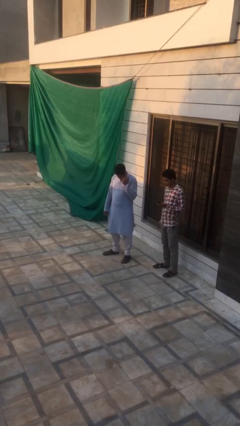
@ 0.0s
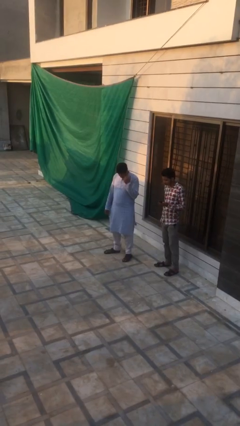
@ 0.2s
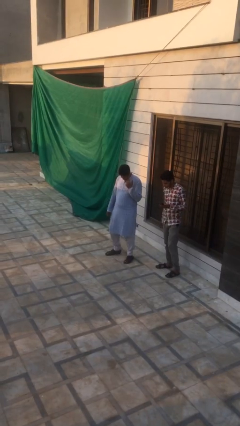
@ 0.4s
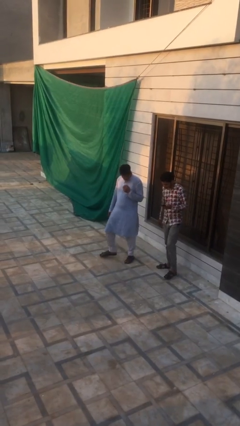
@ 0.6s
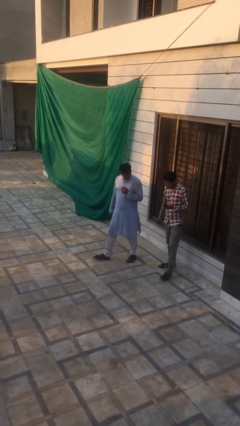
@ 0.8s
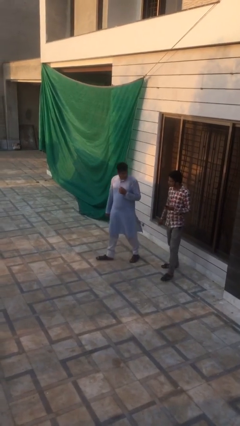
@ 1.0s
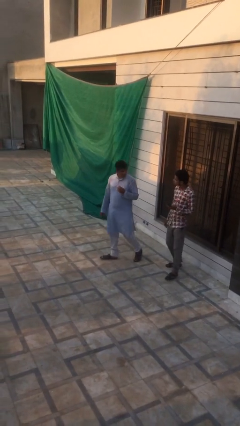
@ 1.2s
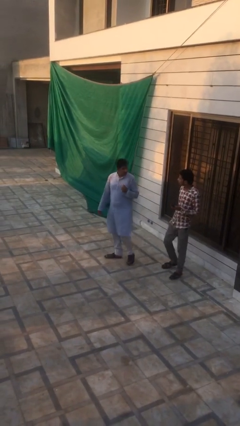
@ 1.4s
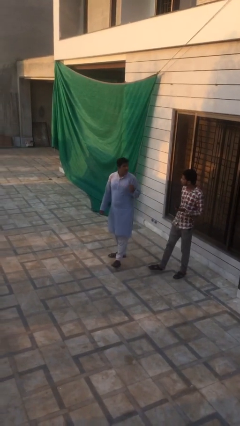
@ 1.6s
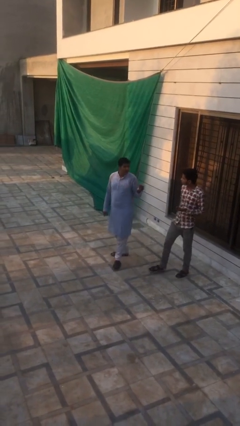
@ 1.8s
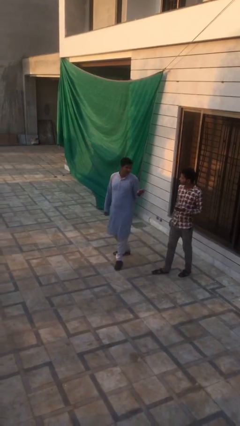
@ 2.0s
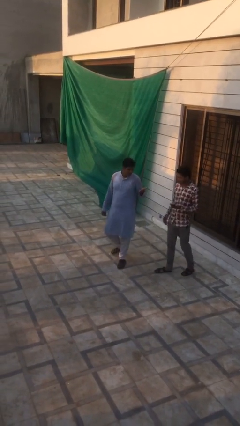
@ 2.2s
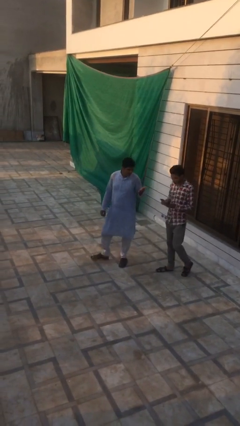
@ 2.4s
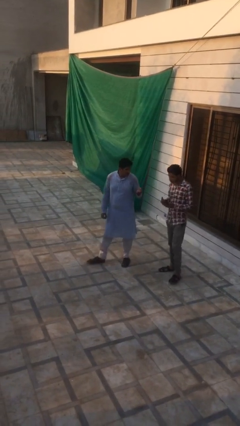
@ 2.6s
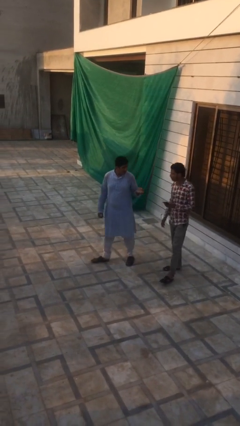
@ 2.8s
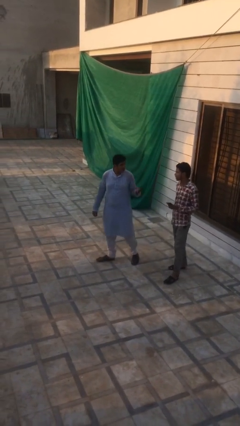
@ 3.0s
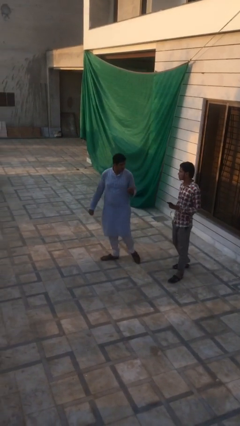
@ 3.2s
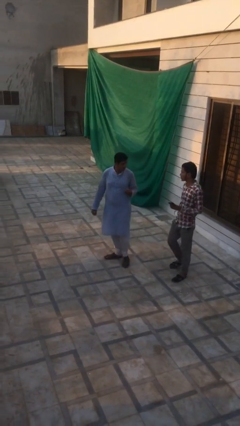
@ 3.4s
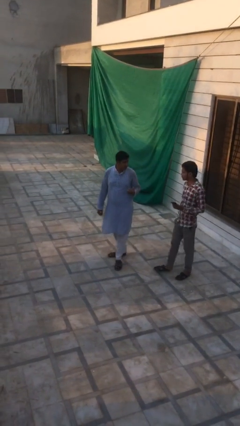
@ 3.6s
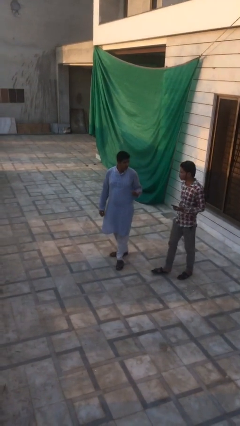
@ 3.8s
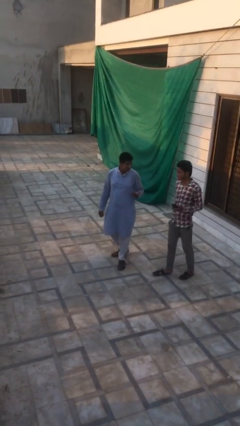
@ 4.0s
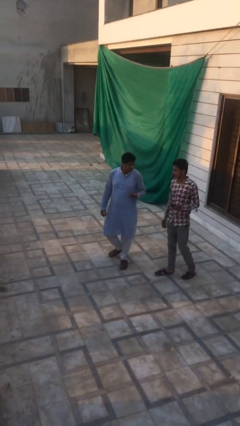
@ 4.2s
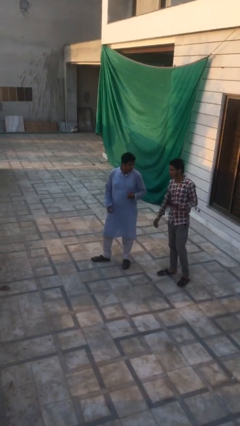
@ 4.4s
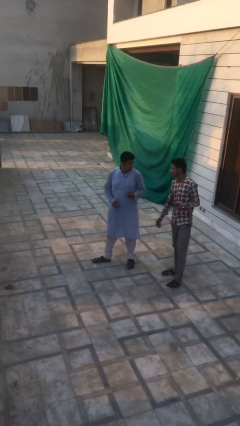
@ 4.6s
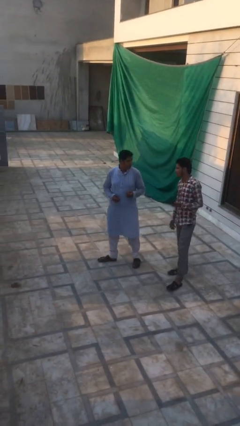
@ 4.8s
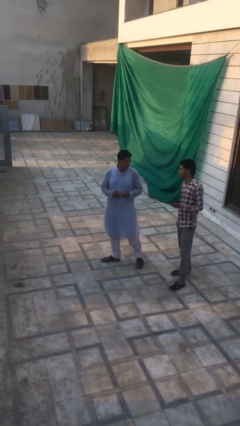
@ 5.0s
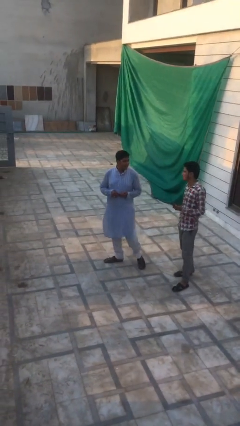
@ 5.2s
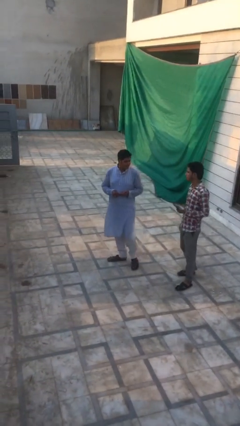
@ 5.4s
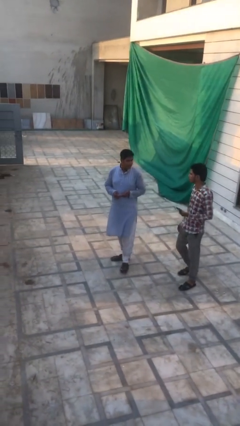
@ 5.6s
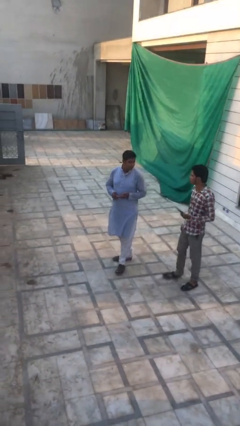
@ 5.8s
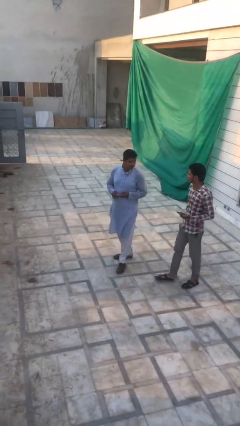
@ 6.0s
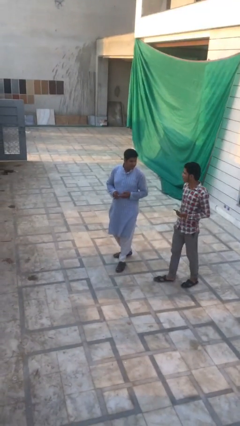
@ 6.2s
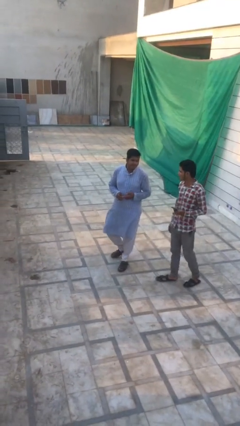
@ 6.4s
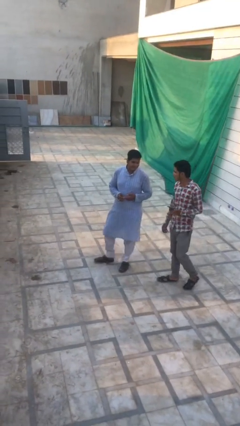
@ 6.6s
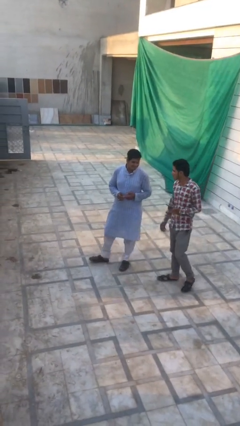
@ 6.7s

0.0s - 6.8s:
person talks to person

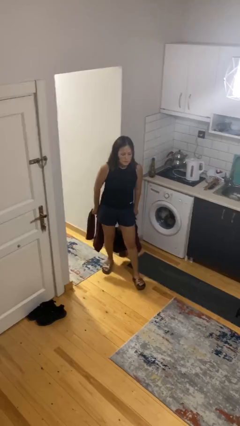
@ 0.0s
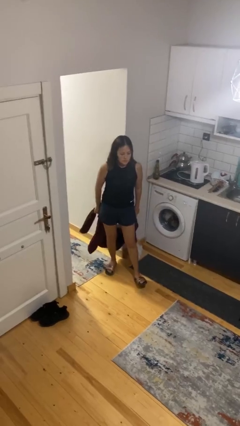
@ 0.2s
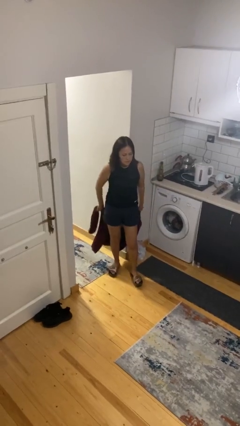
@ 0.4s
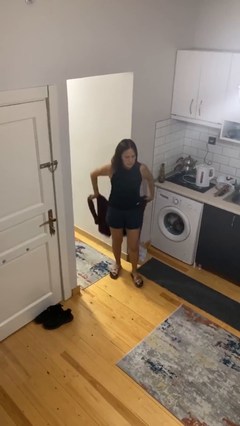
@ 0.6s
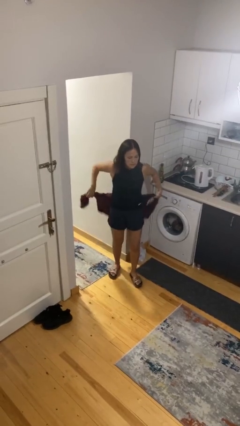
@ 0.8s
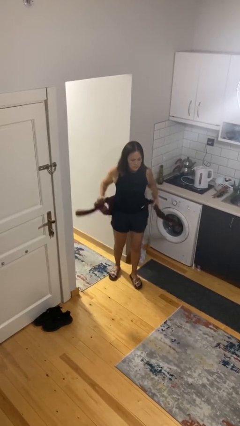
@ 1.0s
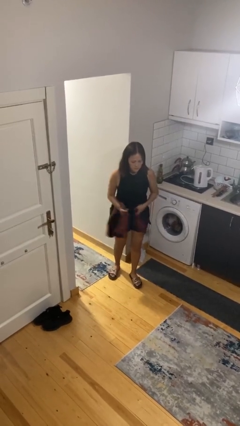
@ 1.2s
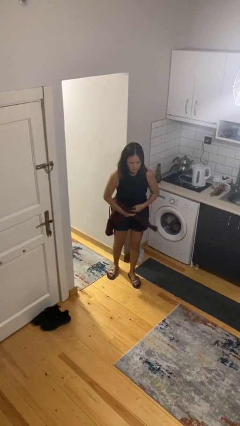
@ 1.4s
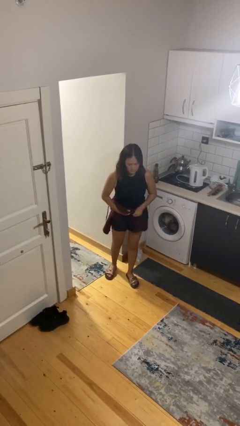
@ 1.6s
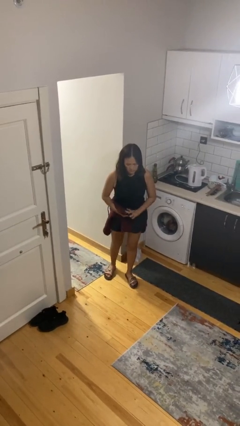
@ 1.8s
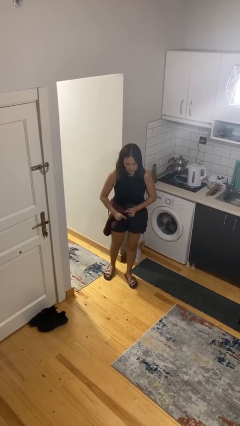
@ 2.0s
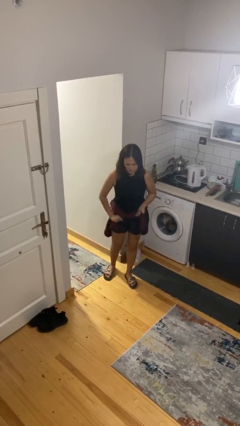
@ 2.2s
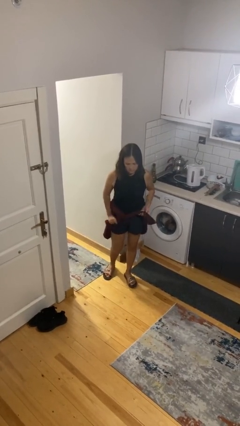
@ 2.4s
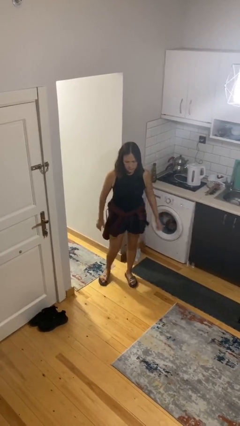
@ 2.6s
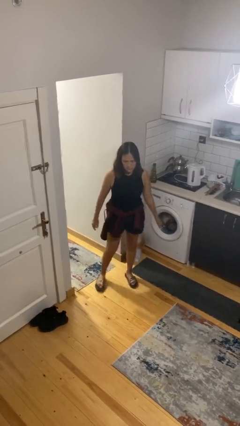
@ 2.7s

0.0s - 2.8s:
person ties jacket around waist

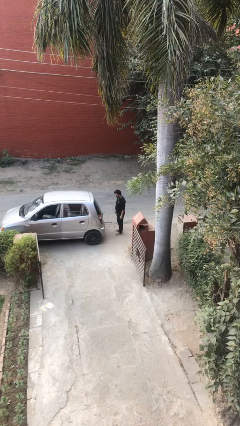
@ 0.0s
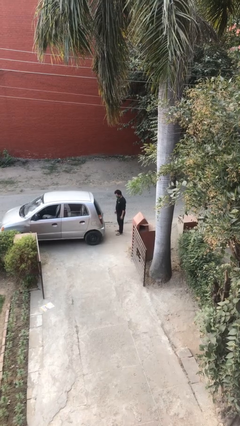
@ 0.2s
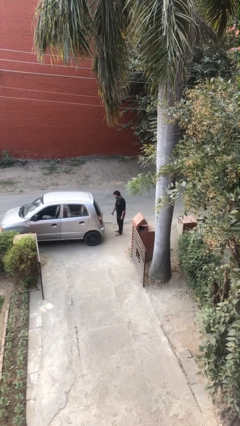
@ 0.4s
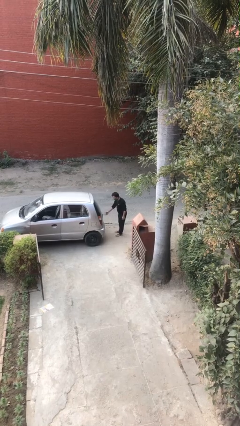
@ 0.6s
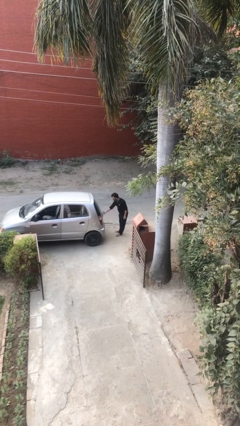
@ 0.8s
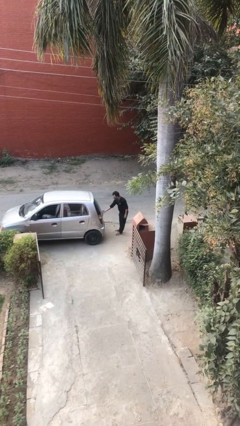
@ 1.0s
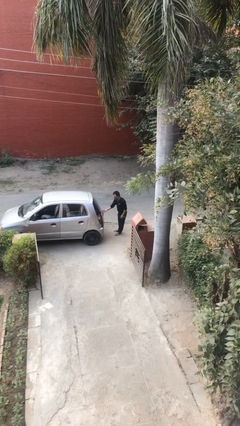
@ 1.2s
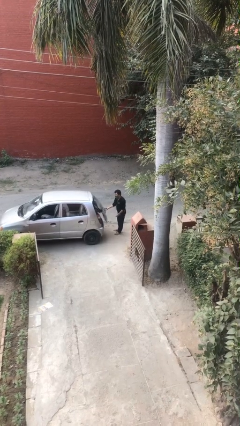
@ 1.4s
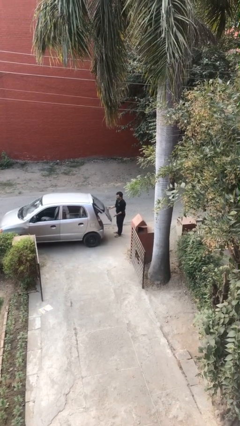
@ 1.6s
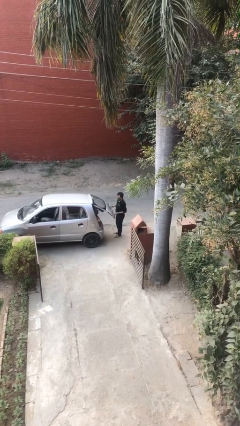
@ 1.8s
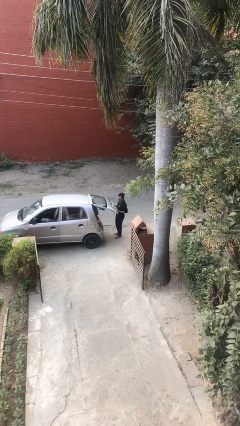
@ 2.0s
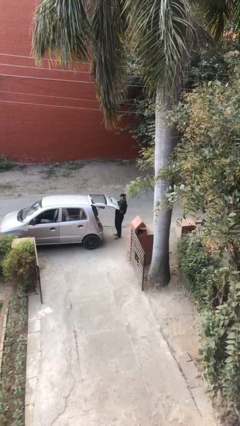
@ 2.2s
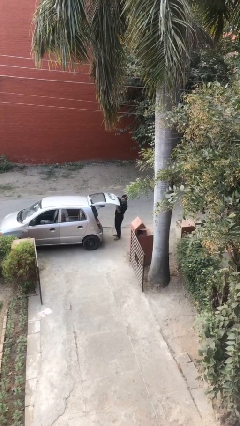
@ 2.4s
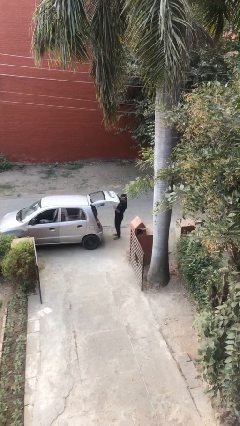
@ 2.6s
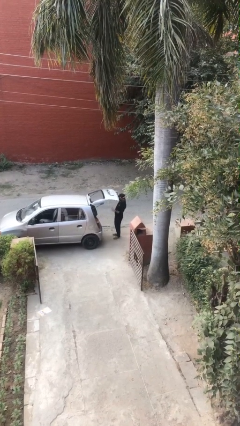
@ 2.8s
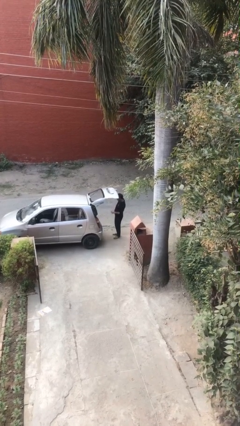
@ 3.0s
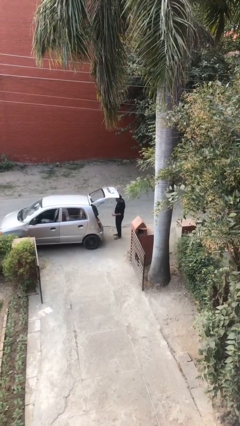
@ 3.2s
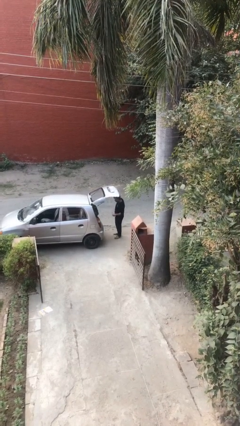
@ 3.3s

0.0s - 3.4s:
person opens car trunk

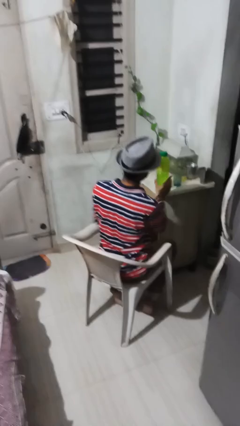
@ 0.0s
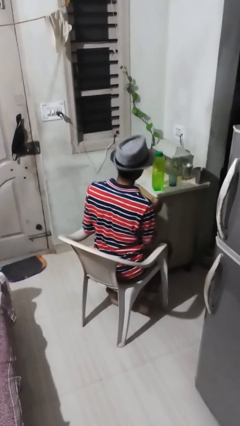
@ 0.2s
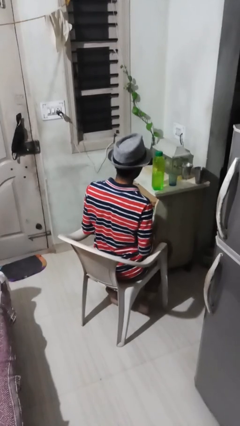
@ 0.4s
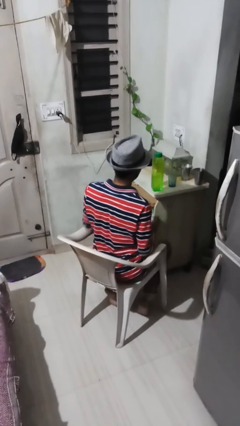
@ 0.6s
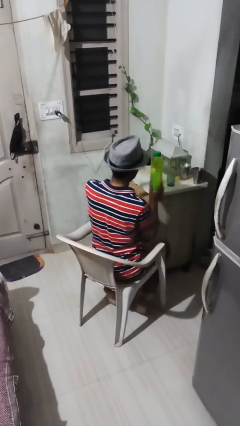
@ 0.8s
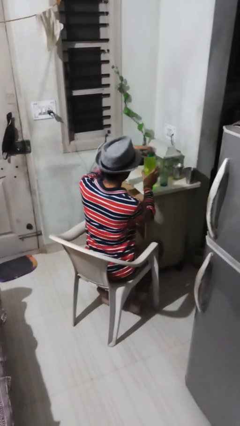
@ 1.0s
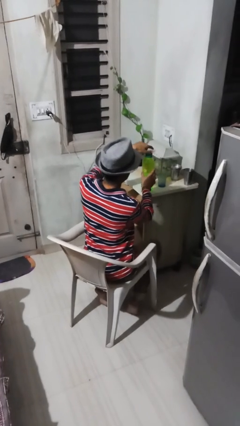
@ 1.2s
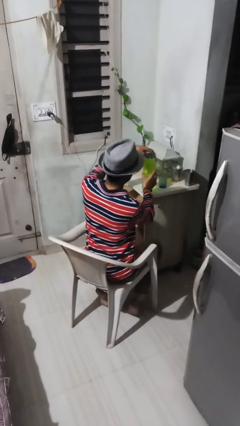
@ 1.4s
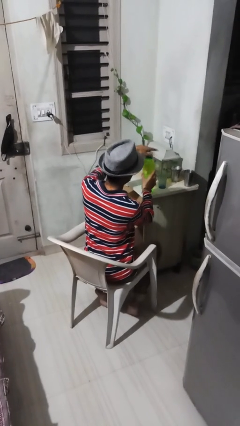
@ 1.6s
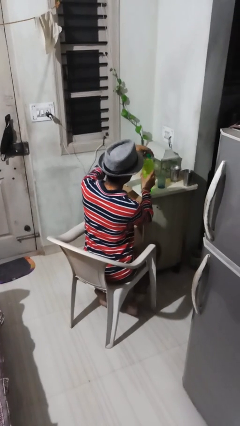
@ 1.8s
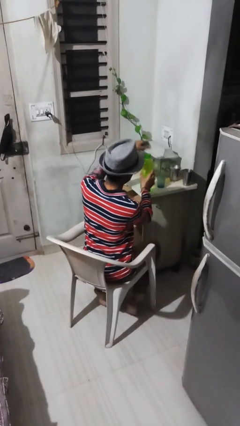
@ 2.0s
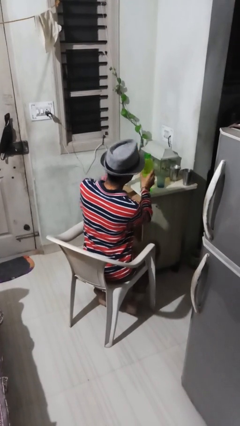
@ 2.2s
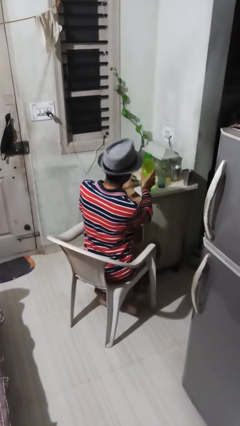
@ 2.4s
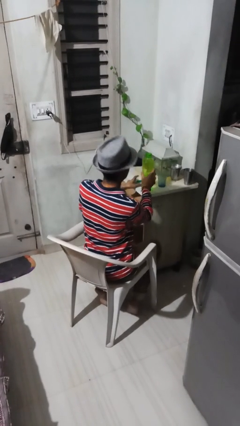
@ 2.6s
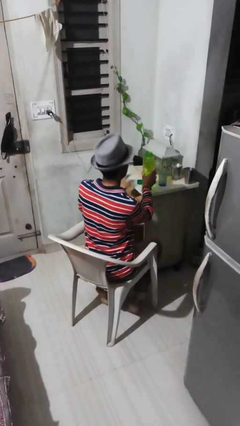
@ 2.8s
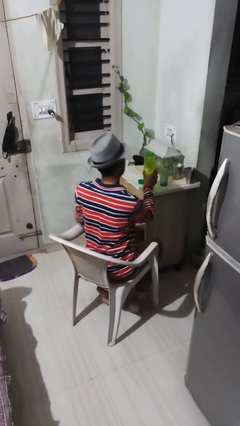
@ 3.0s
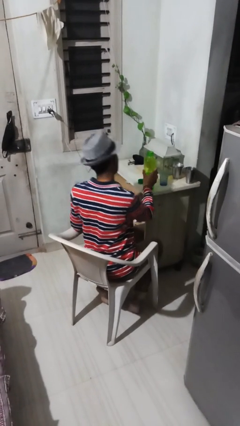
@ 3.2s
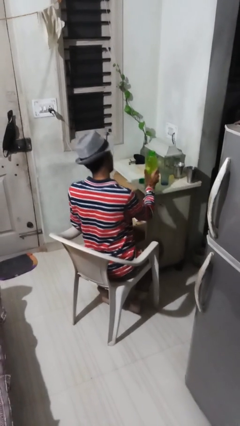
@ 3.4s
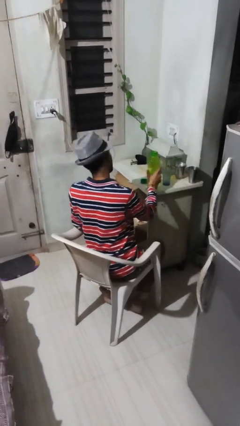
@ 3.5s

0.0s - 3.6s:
person unscrews lid from bottle

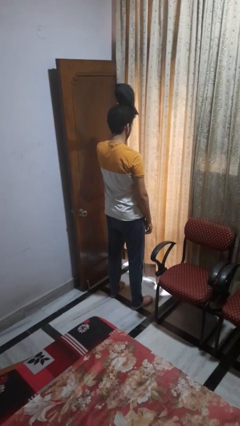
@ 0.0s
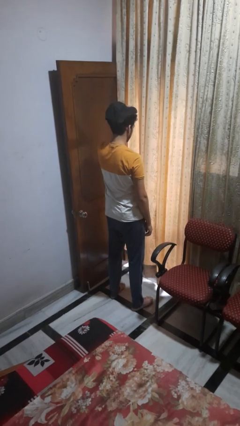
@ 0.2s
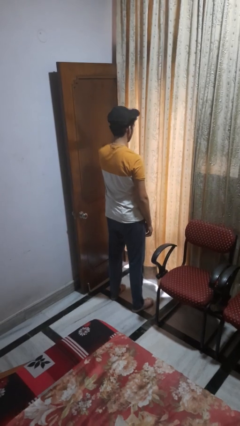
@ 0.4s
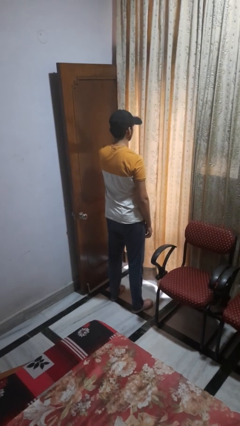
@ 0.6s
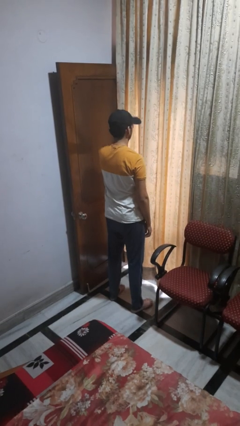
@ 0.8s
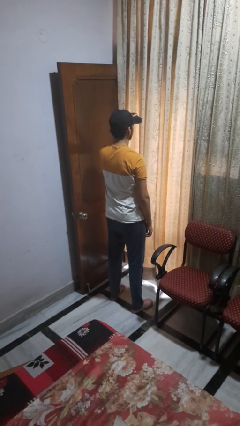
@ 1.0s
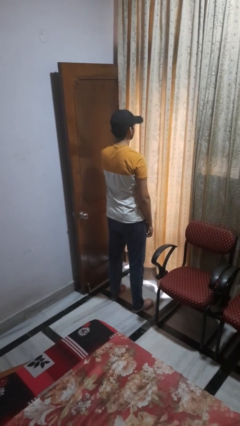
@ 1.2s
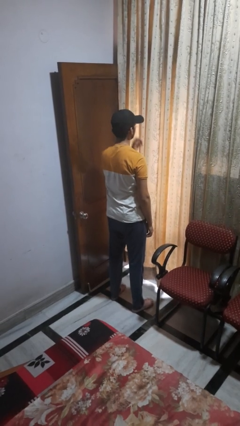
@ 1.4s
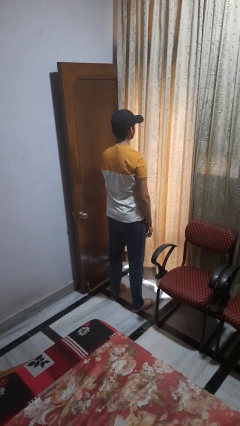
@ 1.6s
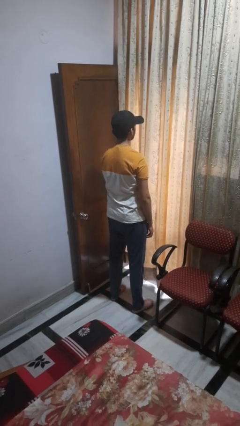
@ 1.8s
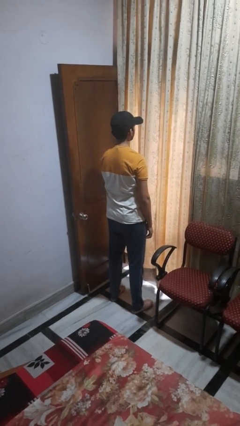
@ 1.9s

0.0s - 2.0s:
person puts on hat
